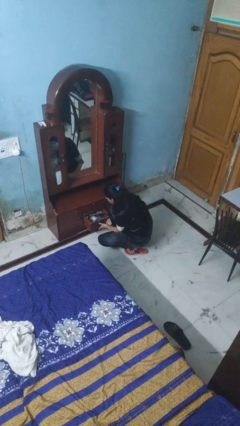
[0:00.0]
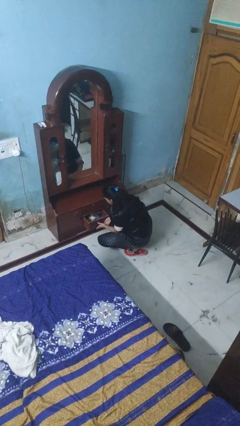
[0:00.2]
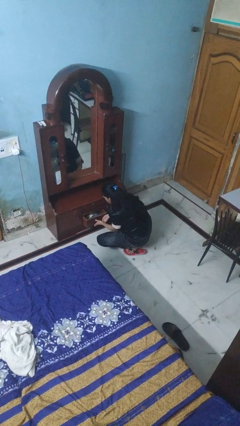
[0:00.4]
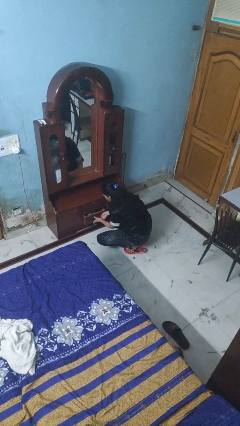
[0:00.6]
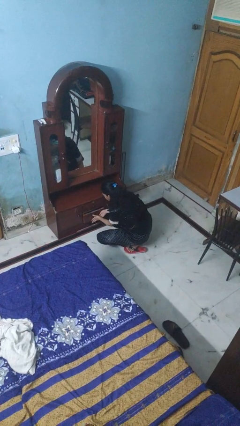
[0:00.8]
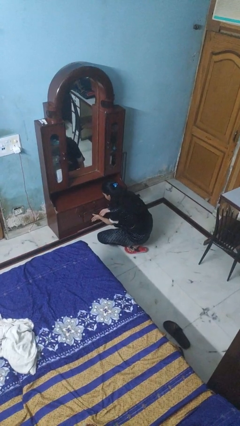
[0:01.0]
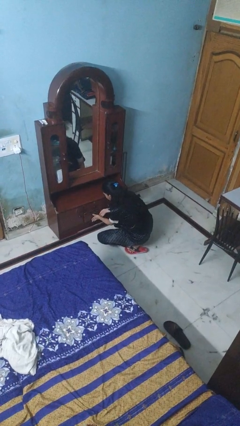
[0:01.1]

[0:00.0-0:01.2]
person closes dresser drawer

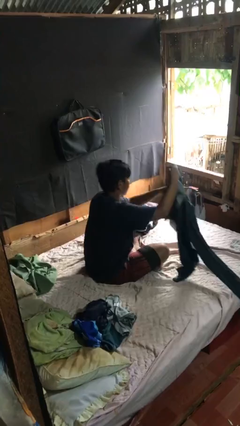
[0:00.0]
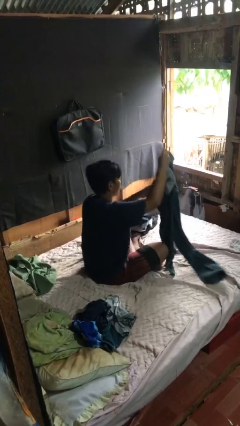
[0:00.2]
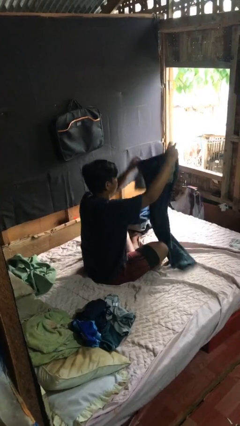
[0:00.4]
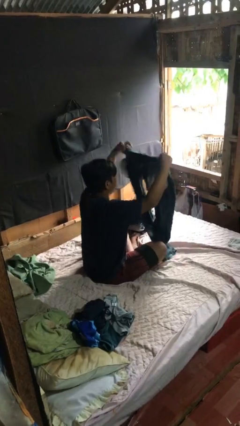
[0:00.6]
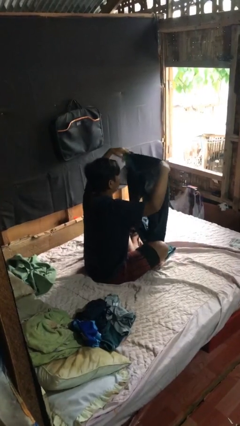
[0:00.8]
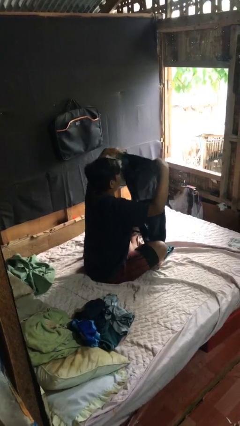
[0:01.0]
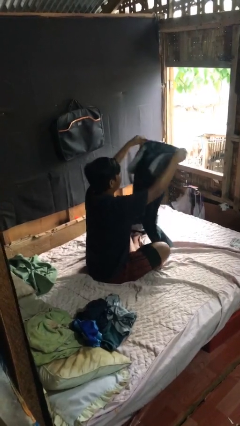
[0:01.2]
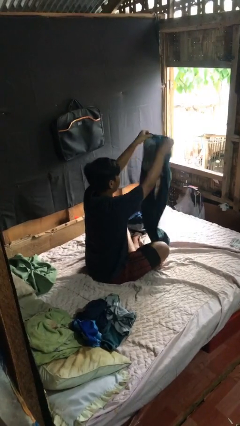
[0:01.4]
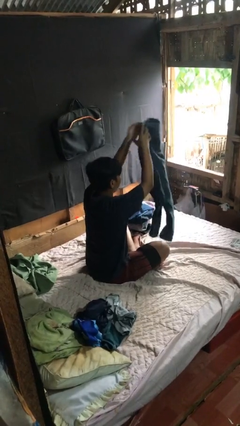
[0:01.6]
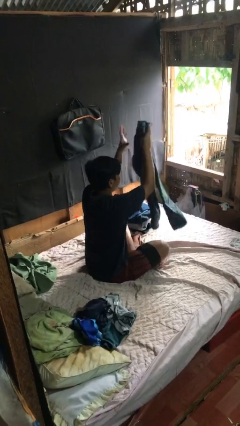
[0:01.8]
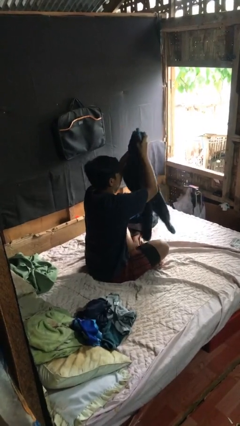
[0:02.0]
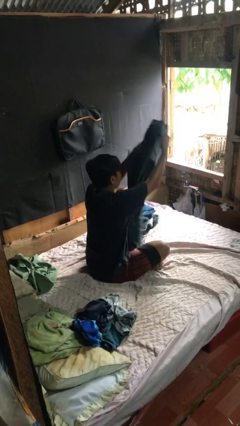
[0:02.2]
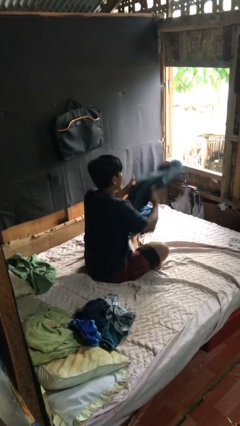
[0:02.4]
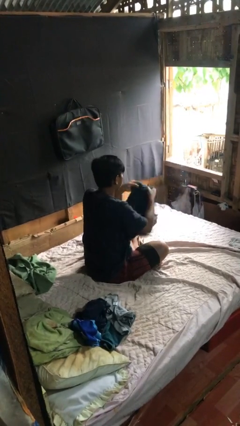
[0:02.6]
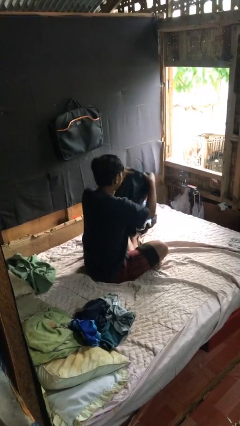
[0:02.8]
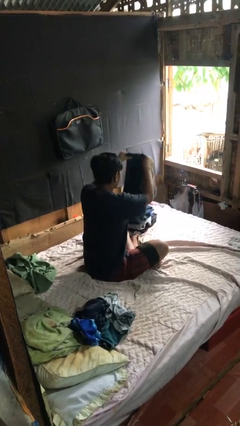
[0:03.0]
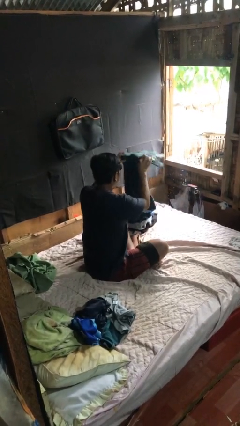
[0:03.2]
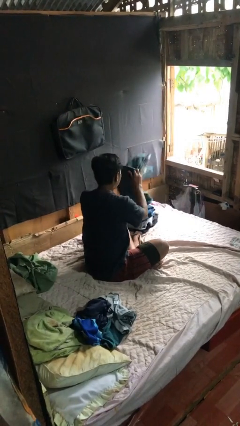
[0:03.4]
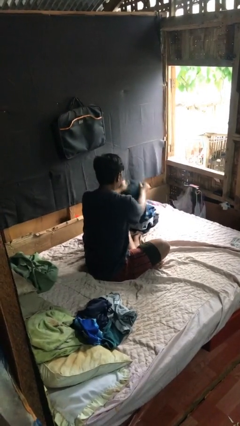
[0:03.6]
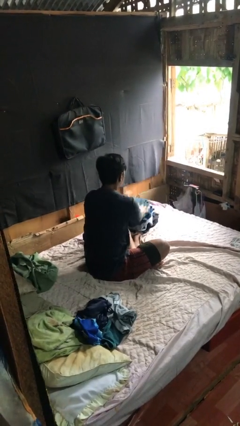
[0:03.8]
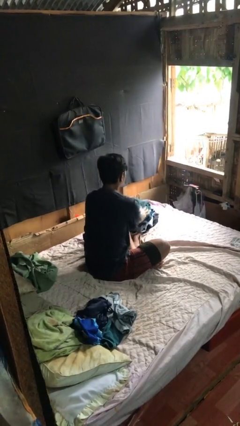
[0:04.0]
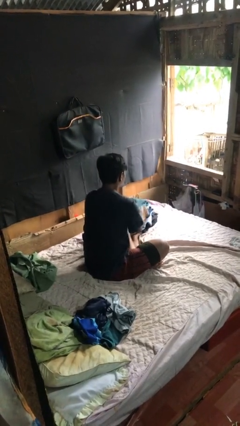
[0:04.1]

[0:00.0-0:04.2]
person folds pants

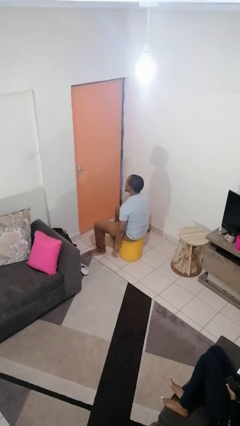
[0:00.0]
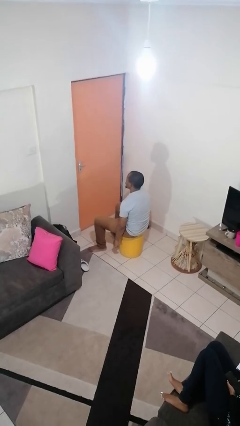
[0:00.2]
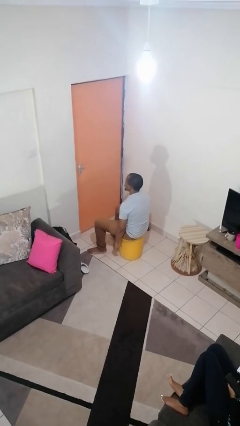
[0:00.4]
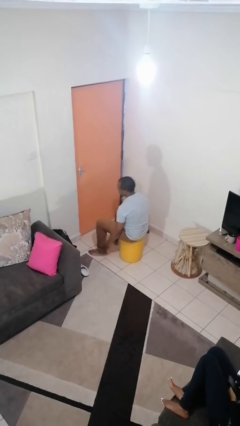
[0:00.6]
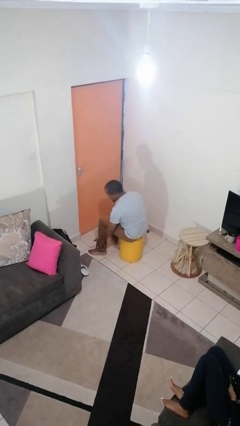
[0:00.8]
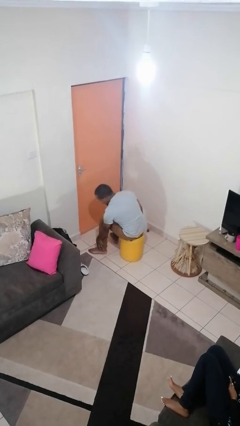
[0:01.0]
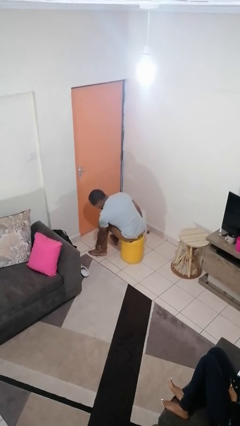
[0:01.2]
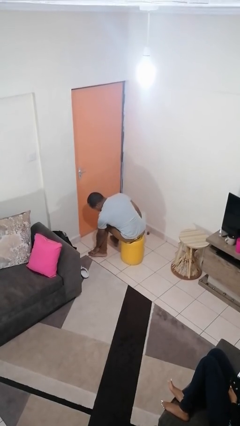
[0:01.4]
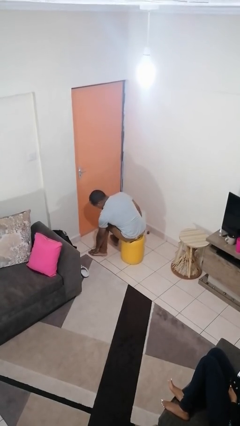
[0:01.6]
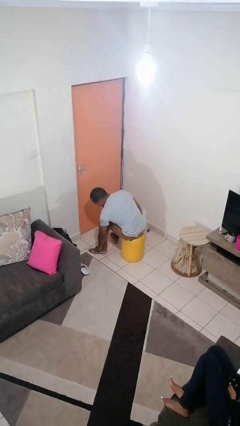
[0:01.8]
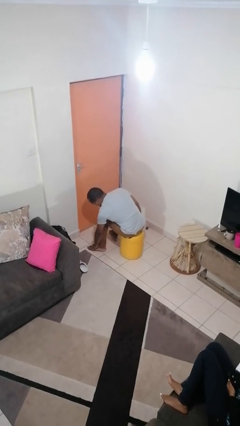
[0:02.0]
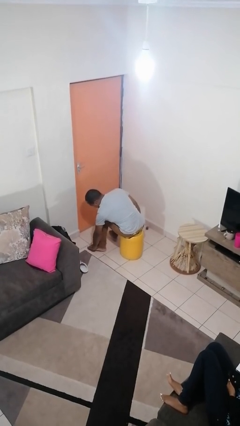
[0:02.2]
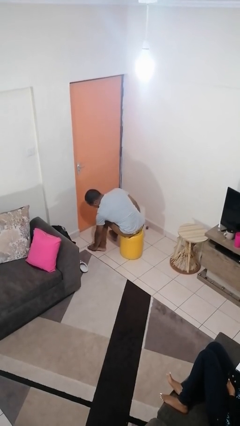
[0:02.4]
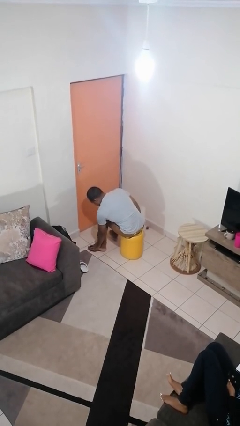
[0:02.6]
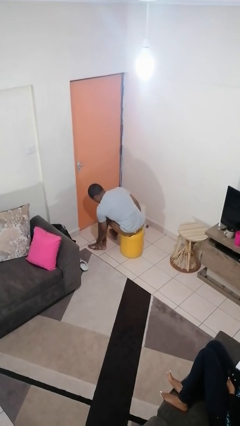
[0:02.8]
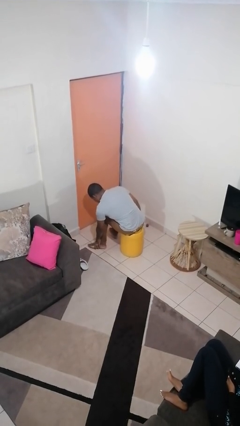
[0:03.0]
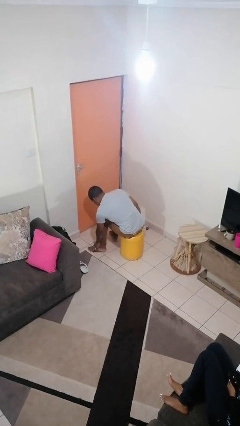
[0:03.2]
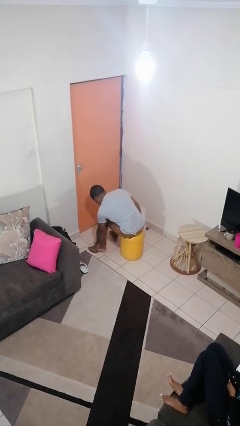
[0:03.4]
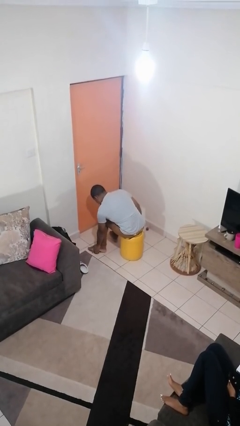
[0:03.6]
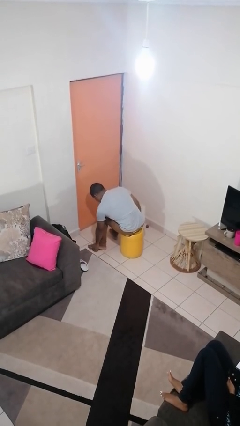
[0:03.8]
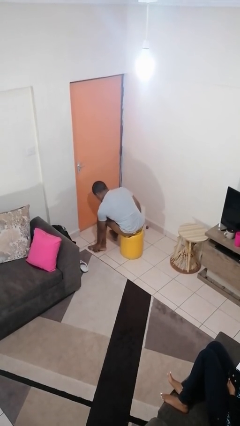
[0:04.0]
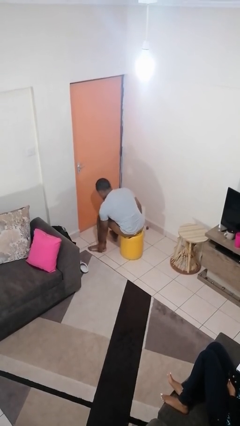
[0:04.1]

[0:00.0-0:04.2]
person rubs foot

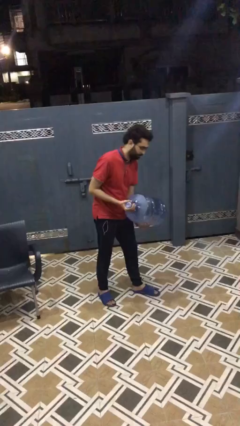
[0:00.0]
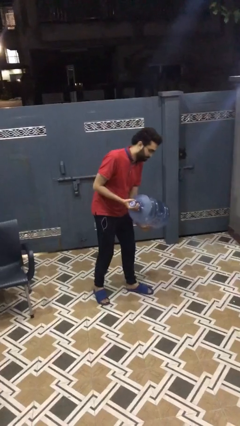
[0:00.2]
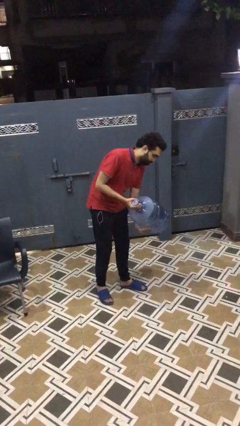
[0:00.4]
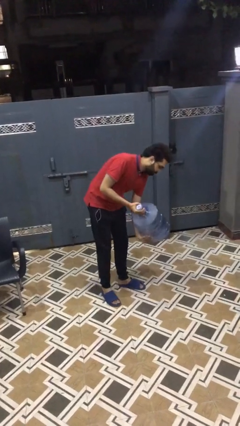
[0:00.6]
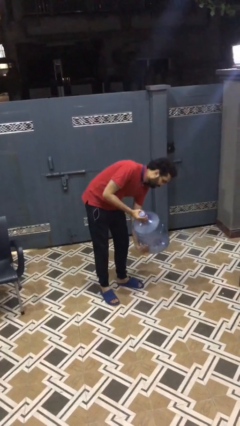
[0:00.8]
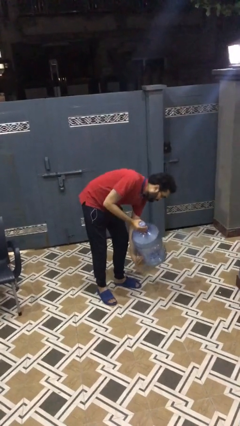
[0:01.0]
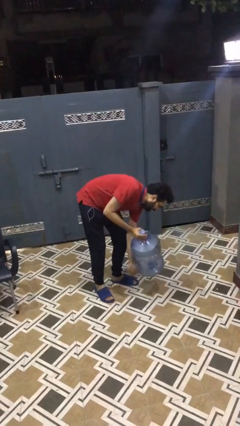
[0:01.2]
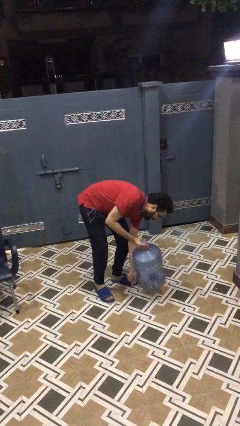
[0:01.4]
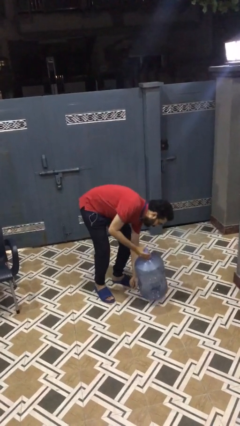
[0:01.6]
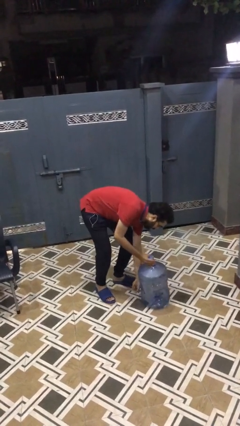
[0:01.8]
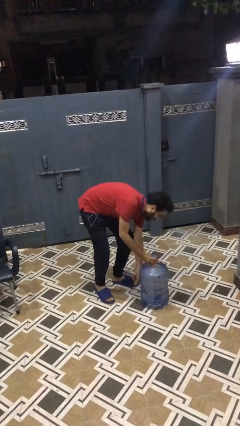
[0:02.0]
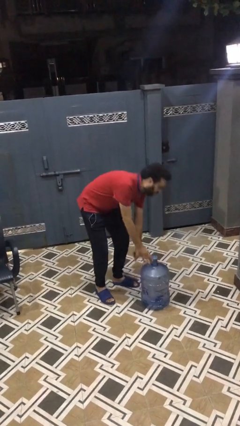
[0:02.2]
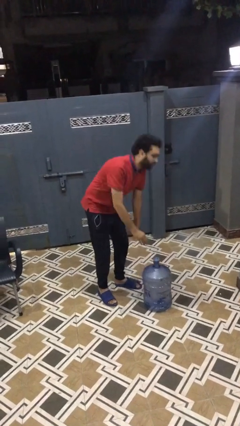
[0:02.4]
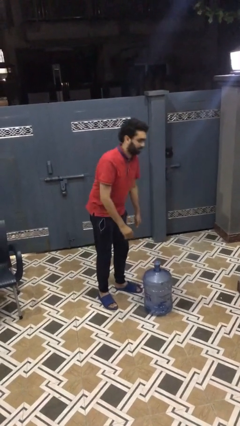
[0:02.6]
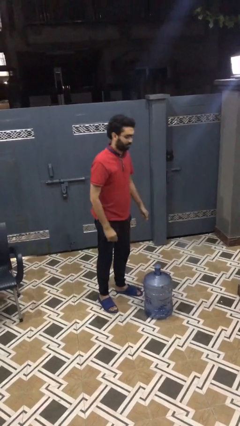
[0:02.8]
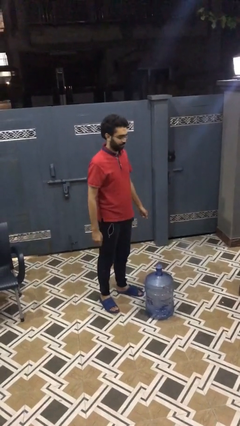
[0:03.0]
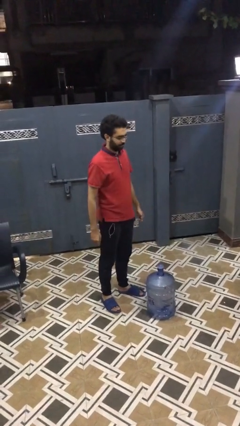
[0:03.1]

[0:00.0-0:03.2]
person puts down object on floor

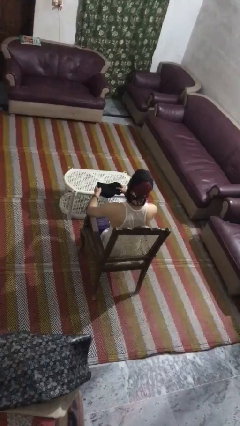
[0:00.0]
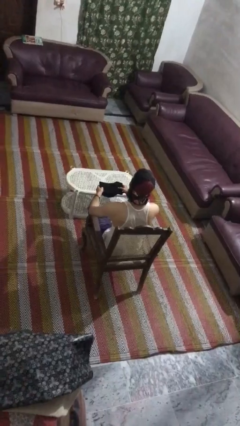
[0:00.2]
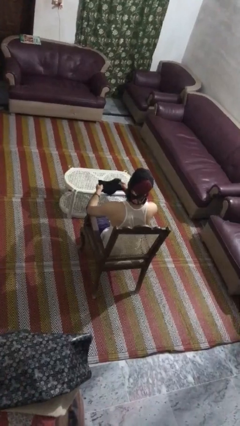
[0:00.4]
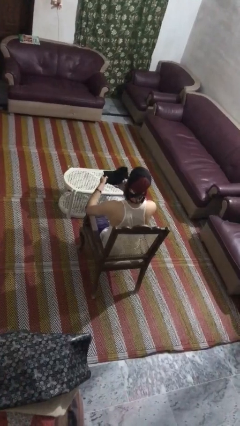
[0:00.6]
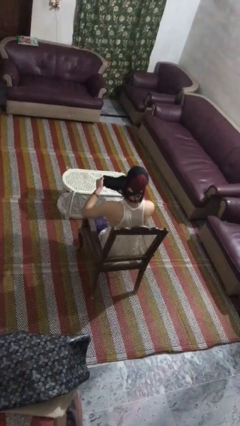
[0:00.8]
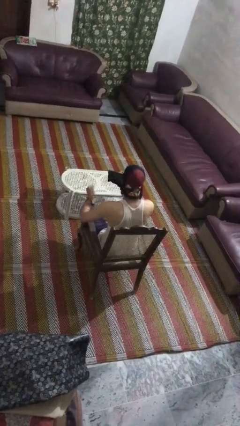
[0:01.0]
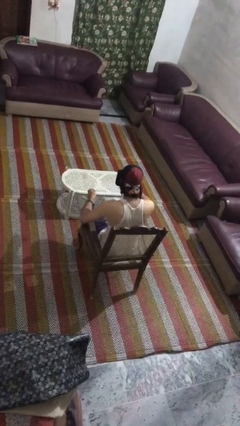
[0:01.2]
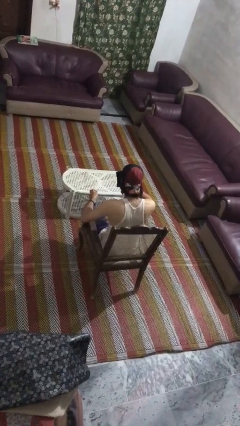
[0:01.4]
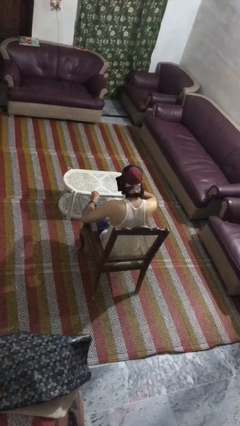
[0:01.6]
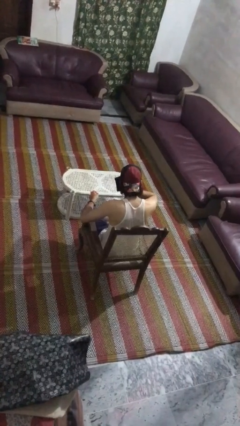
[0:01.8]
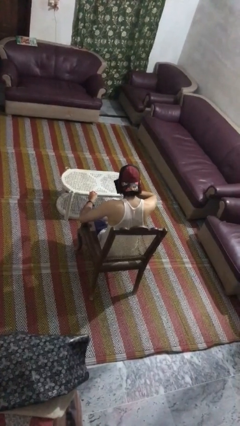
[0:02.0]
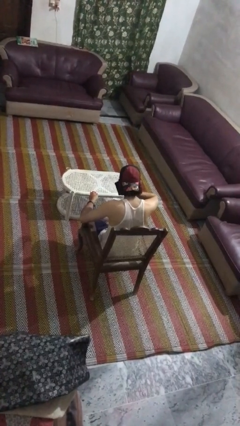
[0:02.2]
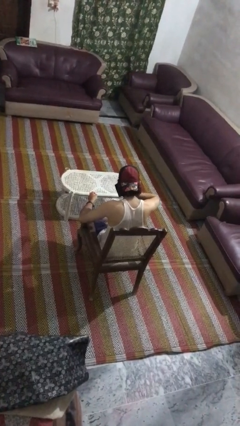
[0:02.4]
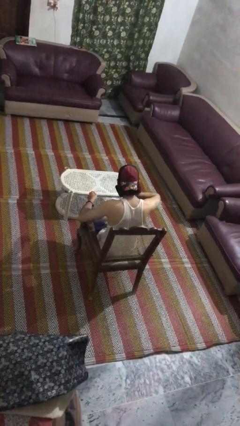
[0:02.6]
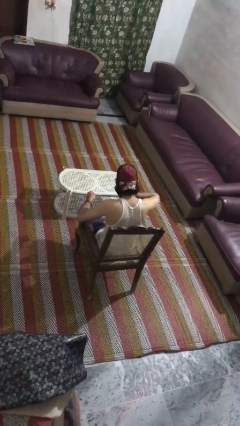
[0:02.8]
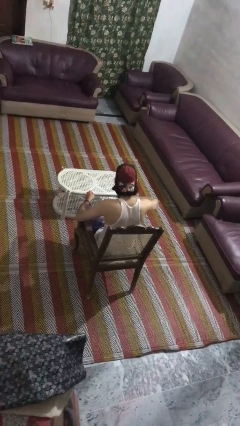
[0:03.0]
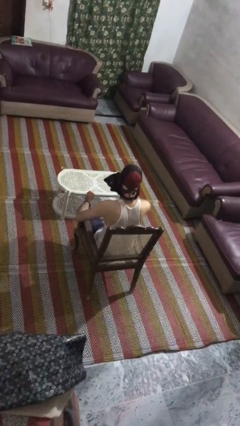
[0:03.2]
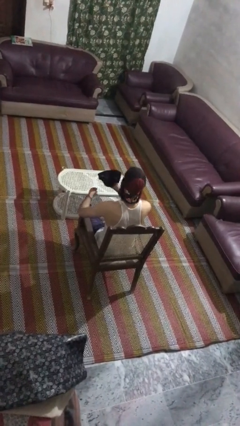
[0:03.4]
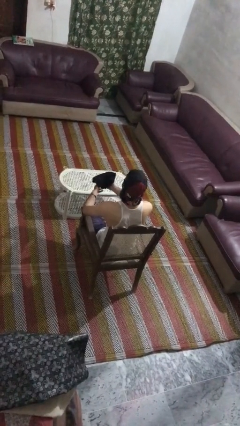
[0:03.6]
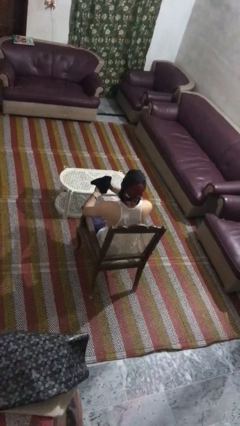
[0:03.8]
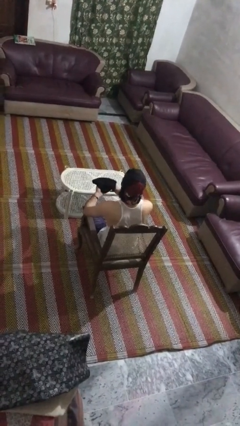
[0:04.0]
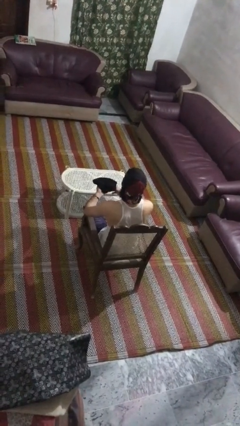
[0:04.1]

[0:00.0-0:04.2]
person blows nose

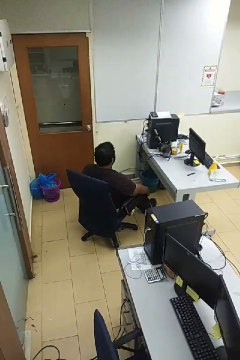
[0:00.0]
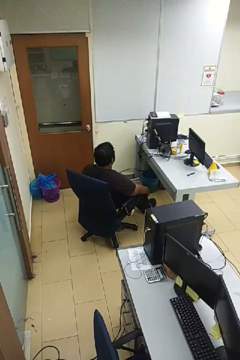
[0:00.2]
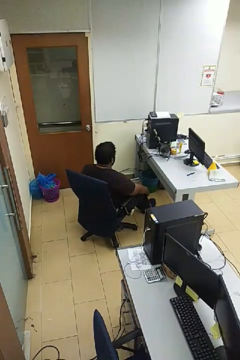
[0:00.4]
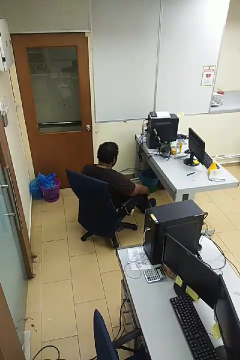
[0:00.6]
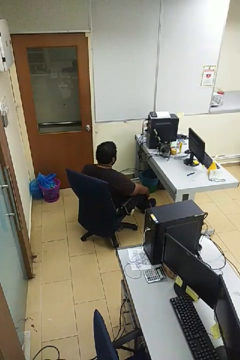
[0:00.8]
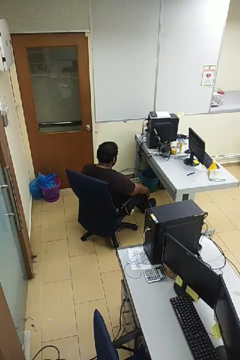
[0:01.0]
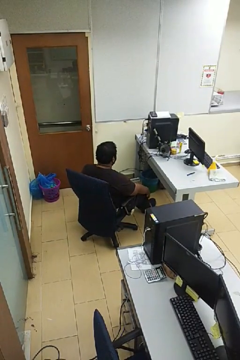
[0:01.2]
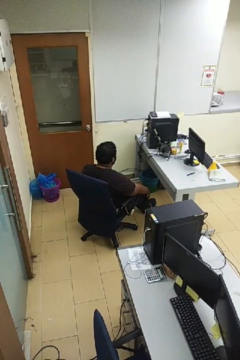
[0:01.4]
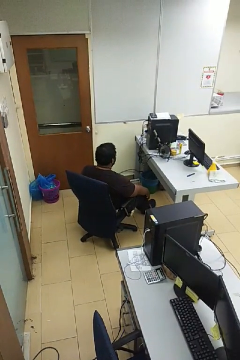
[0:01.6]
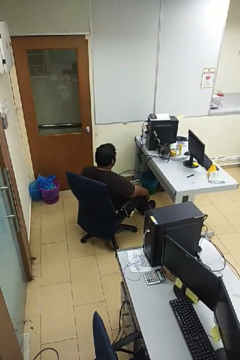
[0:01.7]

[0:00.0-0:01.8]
person nods head
